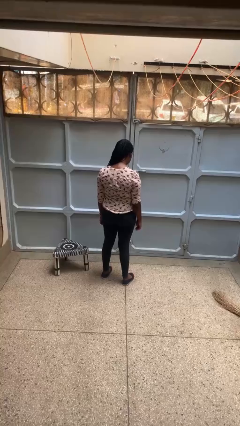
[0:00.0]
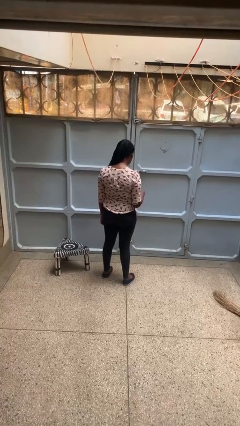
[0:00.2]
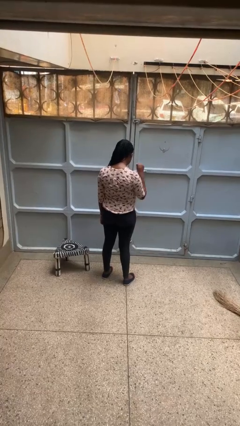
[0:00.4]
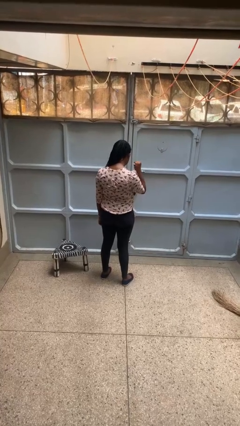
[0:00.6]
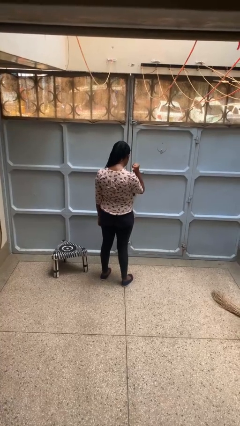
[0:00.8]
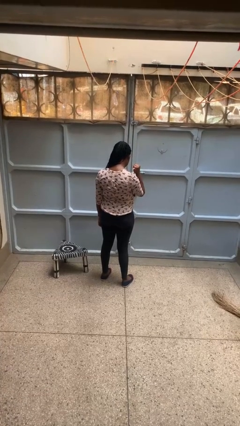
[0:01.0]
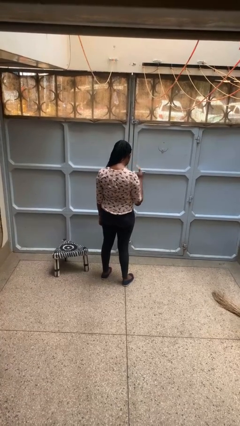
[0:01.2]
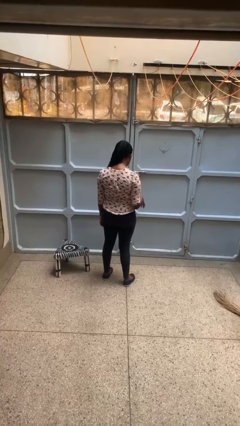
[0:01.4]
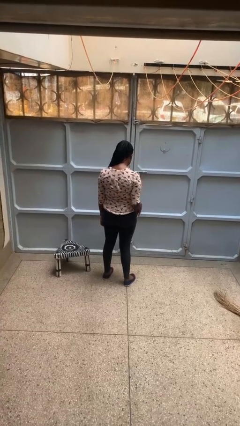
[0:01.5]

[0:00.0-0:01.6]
person gestures behind me

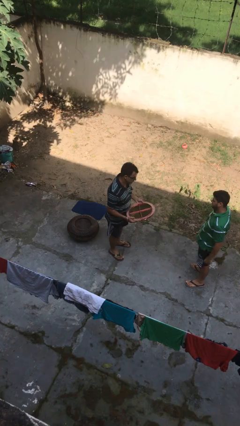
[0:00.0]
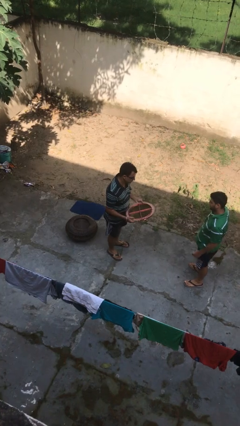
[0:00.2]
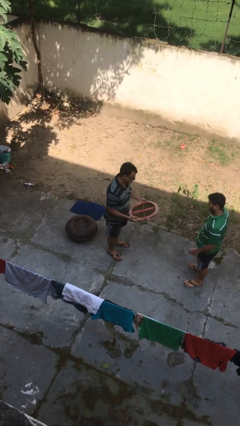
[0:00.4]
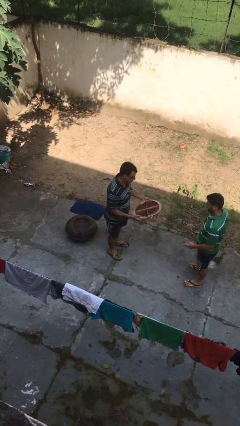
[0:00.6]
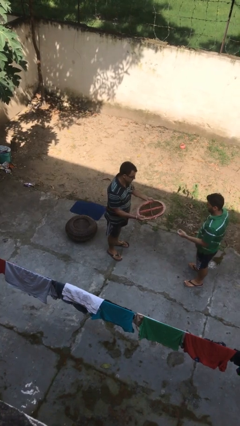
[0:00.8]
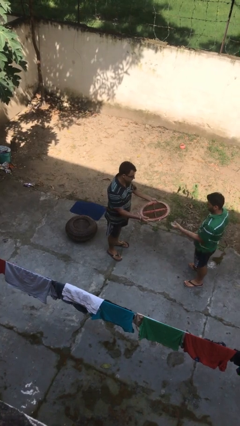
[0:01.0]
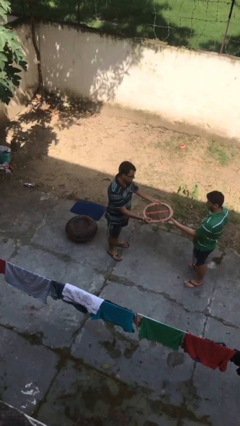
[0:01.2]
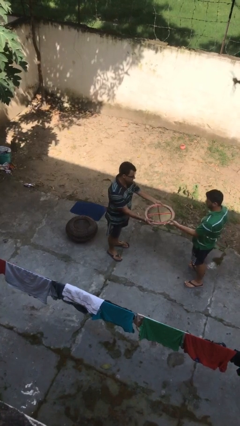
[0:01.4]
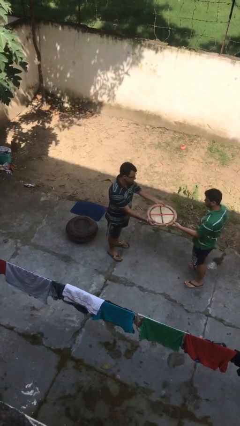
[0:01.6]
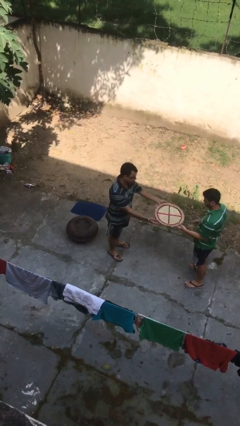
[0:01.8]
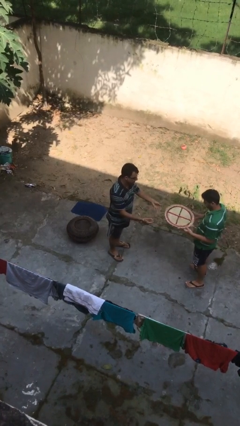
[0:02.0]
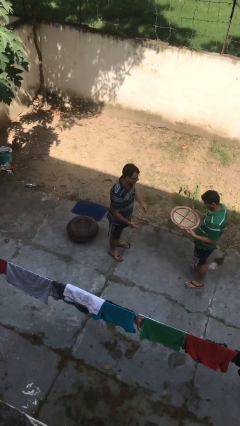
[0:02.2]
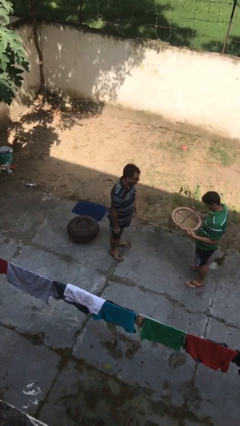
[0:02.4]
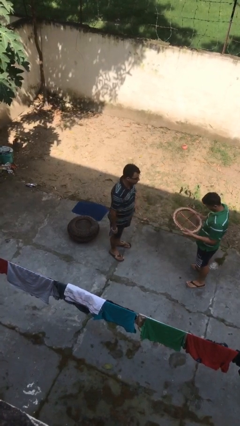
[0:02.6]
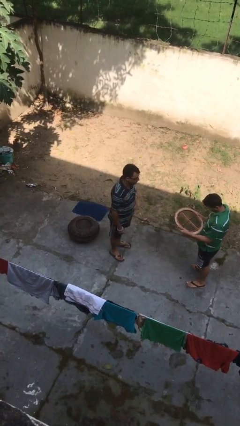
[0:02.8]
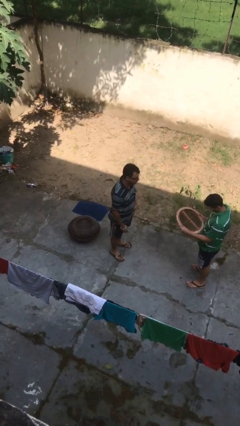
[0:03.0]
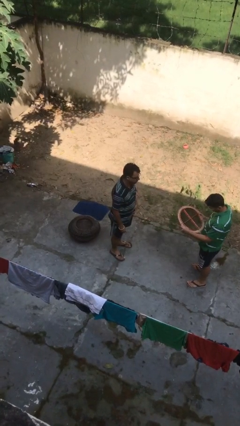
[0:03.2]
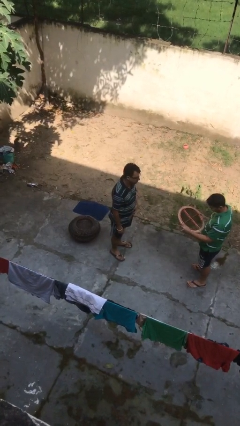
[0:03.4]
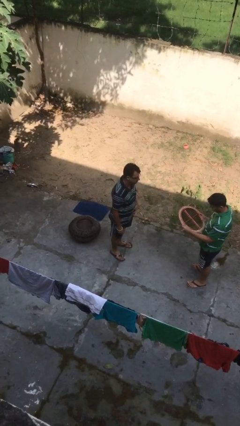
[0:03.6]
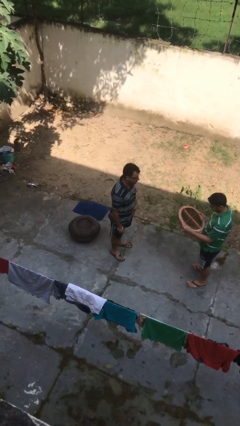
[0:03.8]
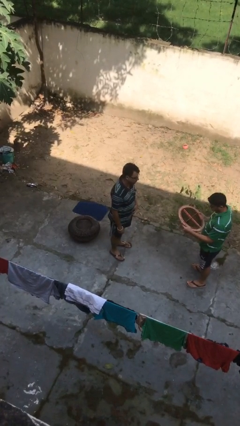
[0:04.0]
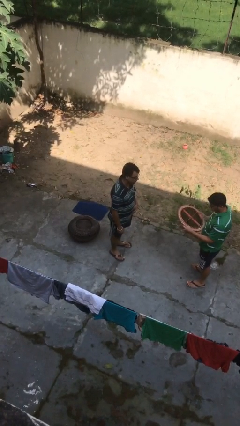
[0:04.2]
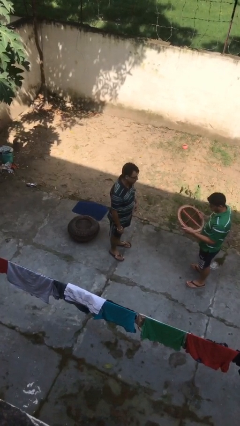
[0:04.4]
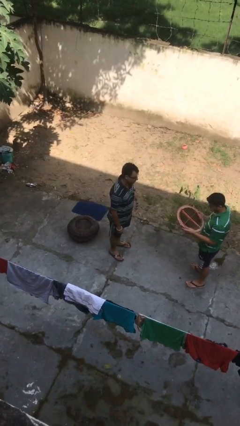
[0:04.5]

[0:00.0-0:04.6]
person transfers object to person

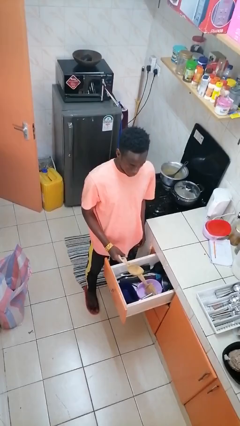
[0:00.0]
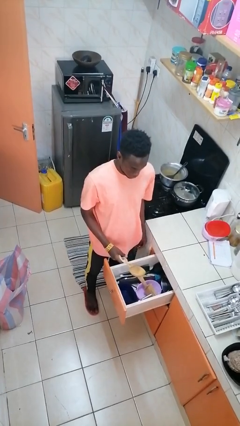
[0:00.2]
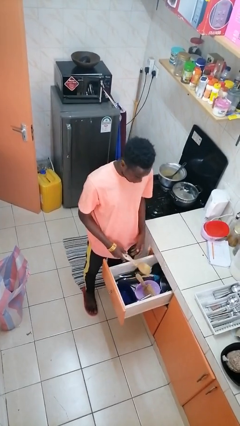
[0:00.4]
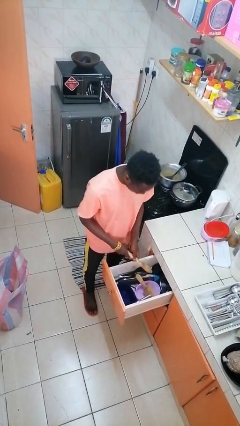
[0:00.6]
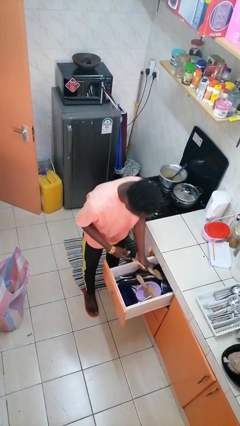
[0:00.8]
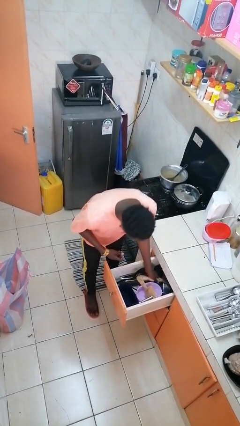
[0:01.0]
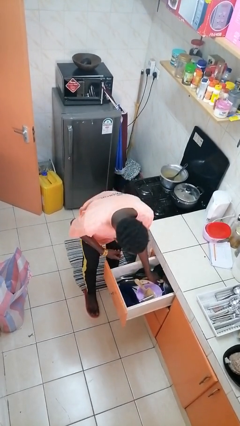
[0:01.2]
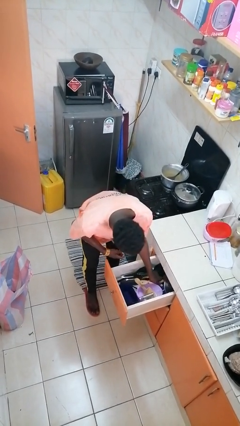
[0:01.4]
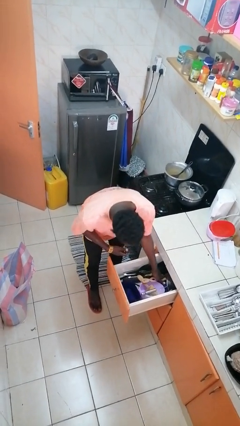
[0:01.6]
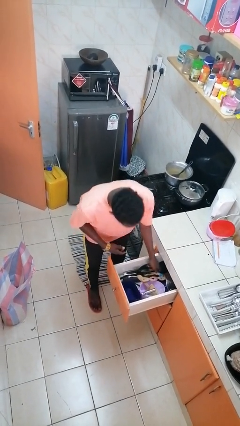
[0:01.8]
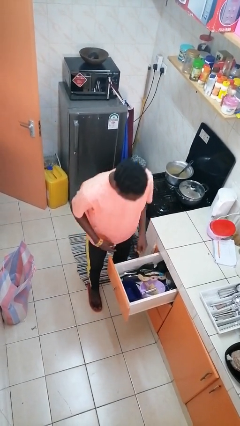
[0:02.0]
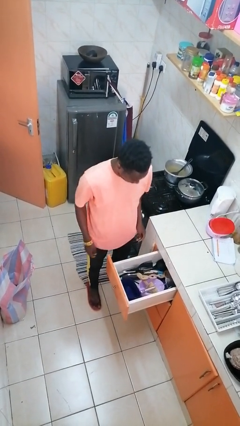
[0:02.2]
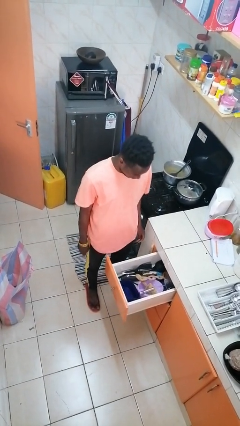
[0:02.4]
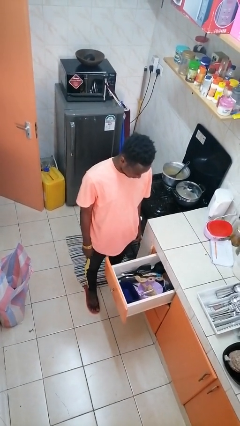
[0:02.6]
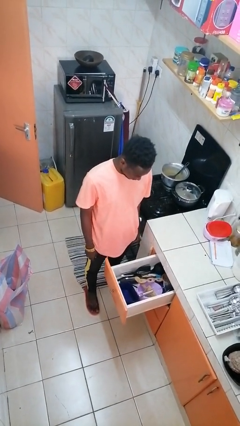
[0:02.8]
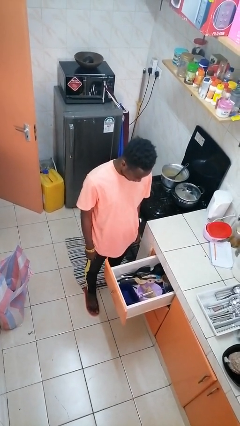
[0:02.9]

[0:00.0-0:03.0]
person puts object into kitchen drawer

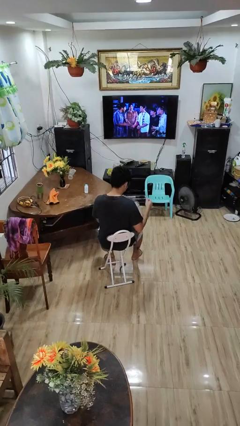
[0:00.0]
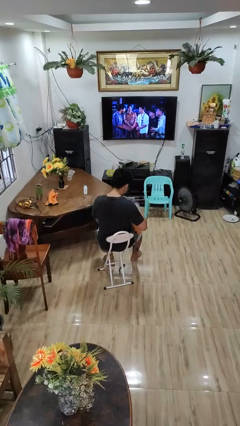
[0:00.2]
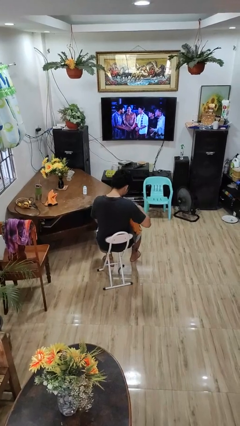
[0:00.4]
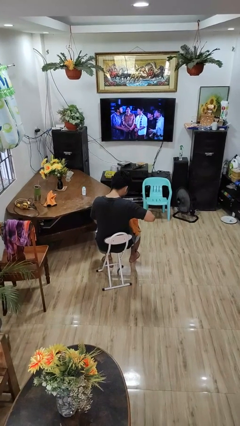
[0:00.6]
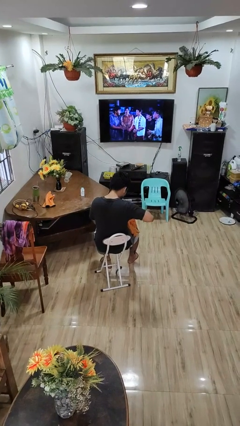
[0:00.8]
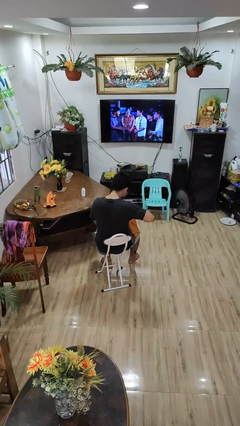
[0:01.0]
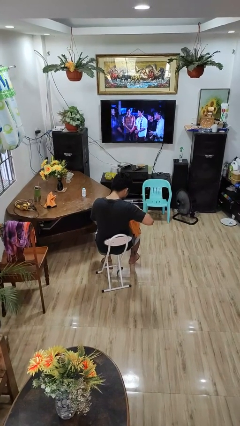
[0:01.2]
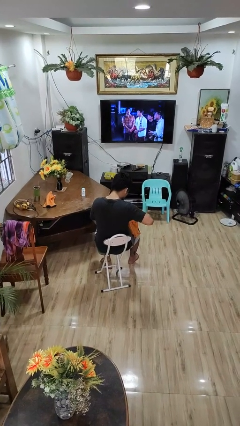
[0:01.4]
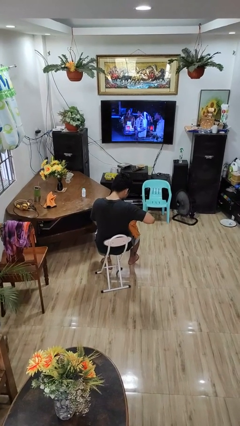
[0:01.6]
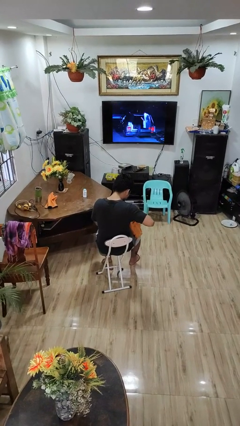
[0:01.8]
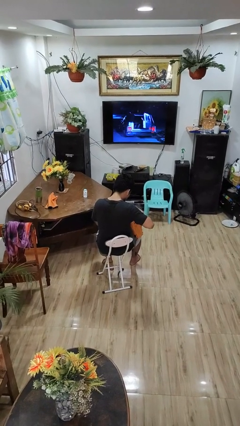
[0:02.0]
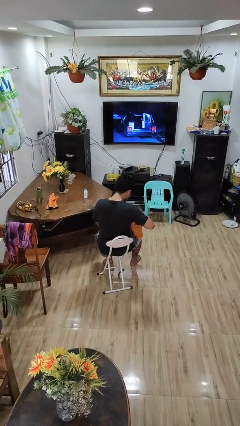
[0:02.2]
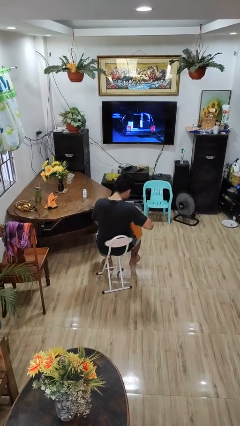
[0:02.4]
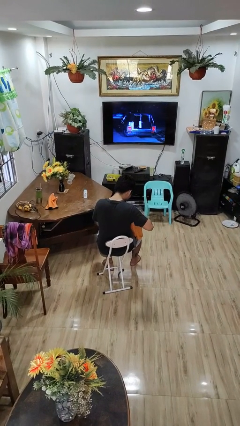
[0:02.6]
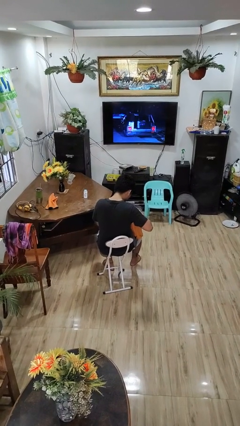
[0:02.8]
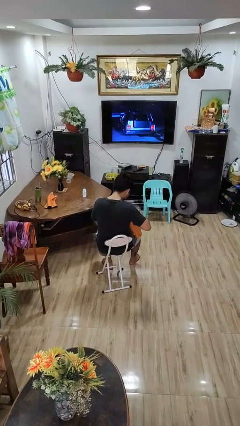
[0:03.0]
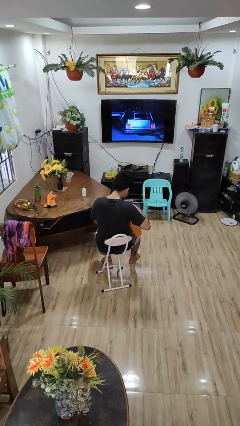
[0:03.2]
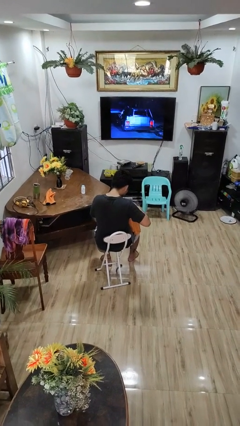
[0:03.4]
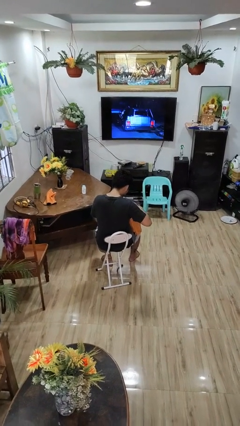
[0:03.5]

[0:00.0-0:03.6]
person searches in backpack

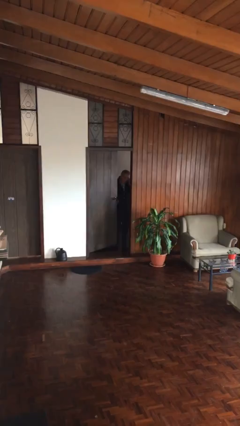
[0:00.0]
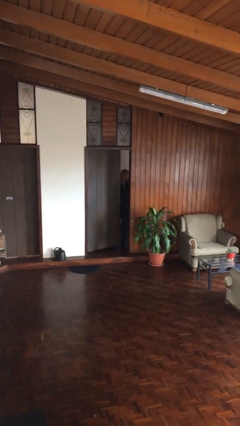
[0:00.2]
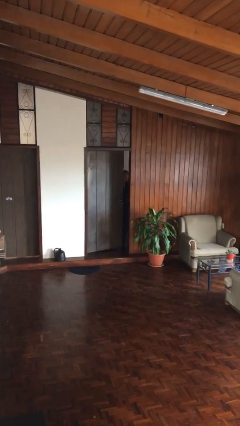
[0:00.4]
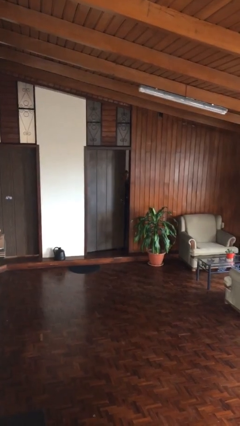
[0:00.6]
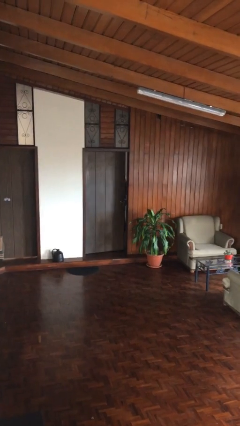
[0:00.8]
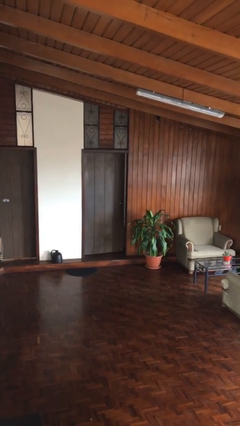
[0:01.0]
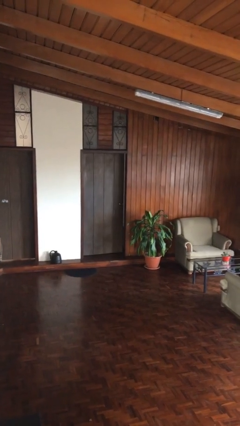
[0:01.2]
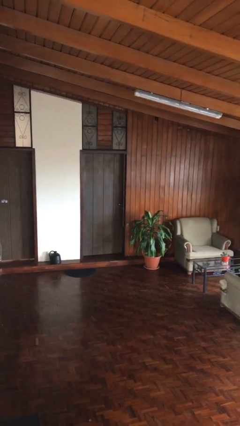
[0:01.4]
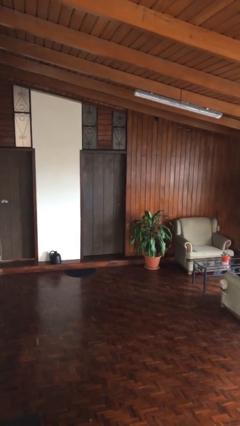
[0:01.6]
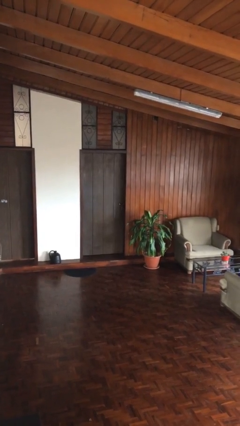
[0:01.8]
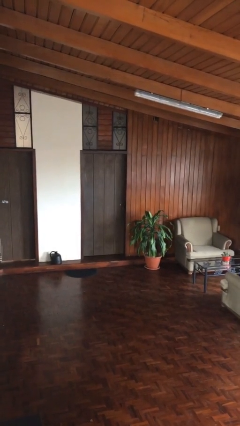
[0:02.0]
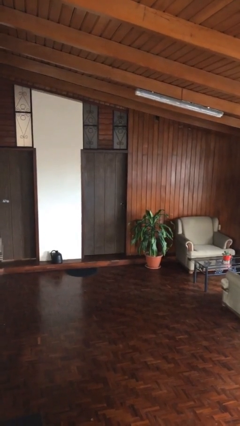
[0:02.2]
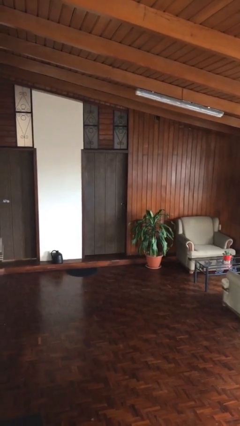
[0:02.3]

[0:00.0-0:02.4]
person closes facility door

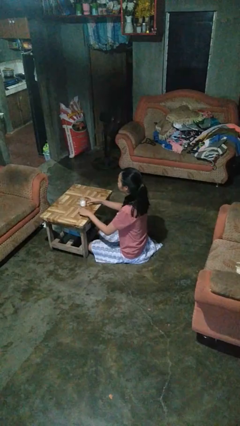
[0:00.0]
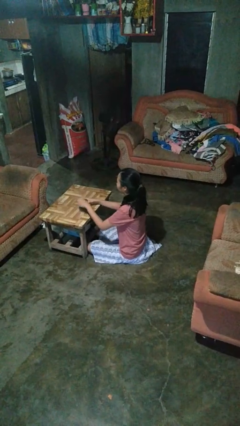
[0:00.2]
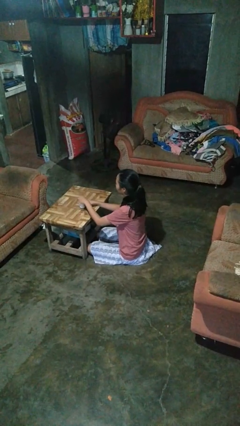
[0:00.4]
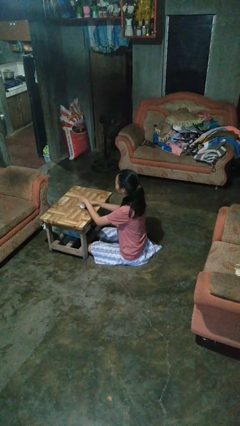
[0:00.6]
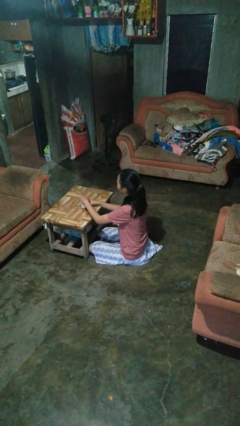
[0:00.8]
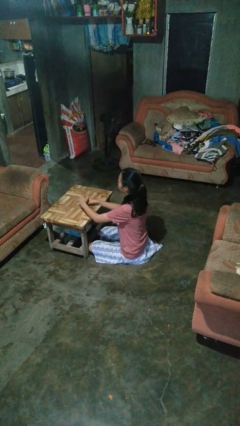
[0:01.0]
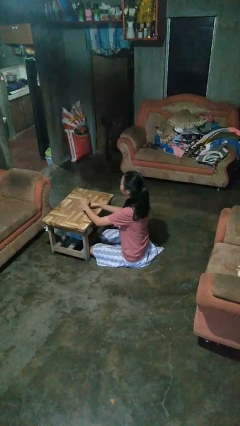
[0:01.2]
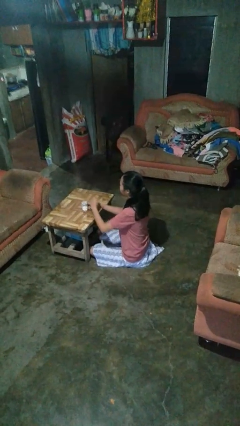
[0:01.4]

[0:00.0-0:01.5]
person closes jar

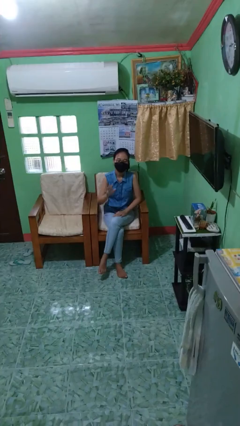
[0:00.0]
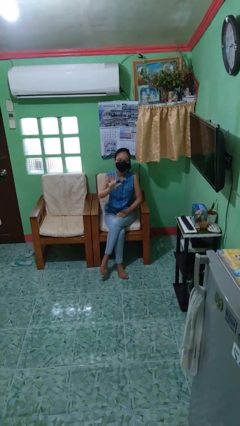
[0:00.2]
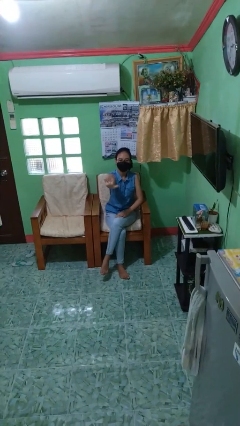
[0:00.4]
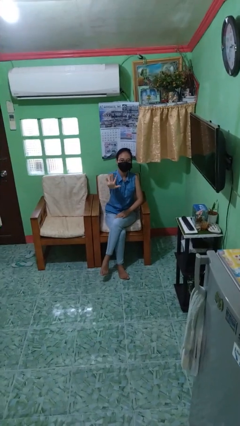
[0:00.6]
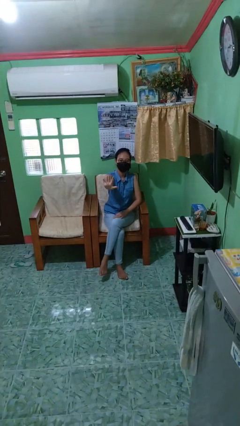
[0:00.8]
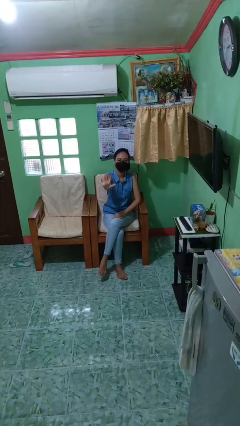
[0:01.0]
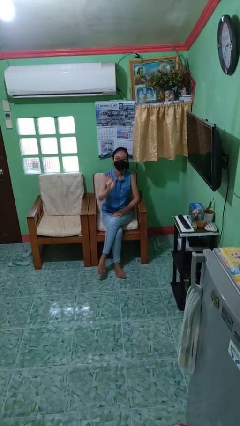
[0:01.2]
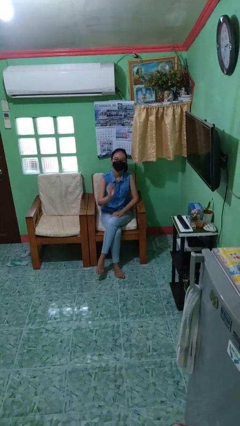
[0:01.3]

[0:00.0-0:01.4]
person gestures stop
